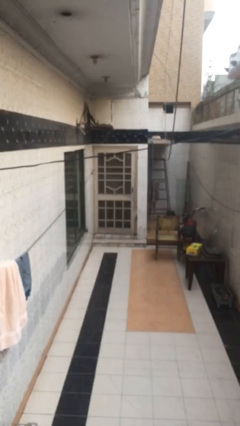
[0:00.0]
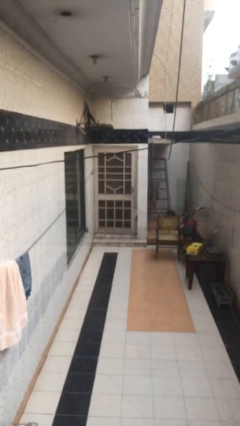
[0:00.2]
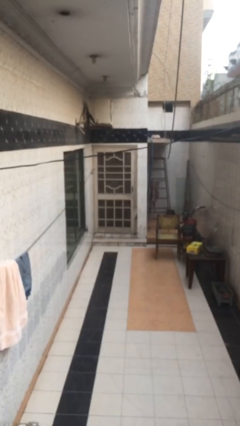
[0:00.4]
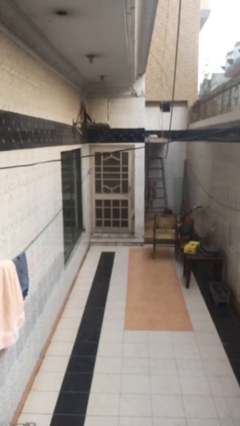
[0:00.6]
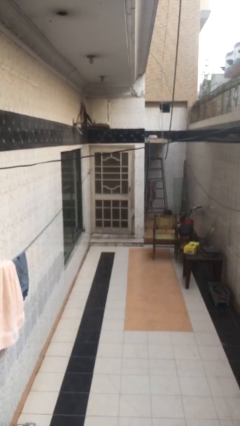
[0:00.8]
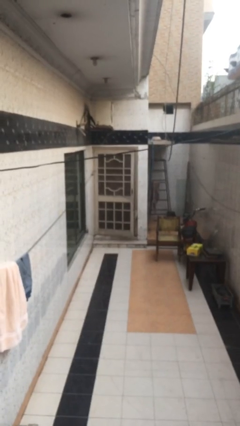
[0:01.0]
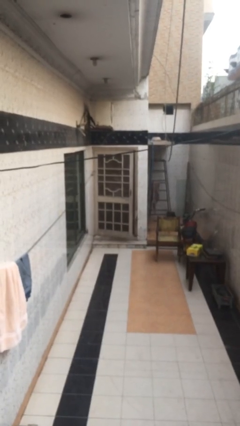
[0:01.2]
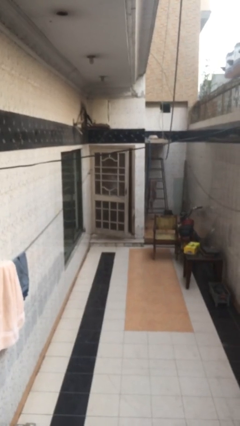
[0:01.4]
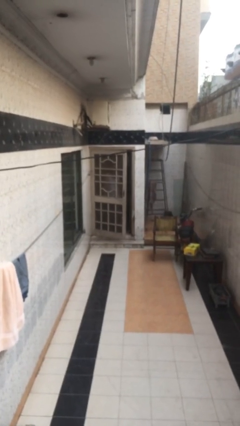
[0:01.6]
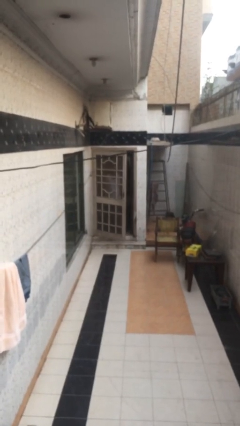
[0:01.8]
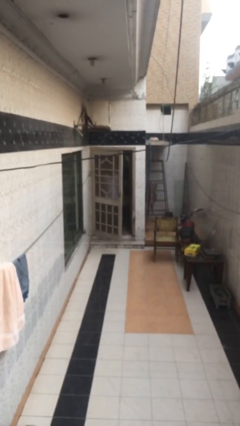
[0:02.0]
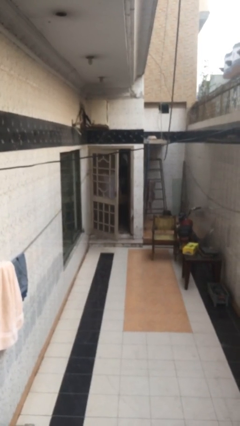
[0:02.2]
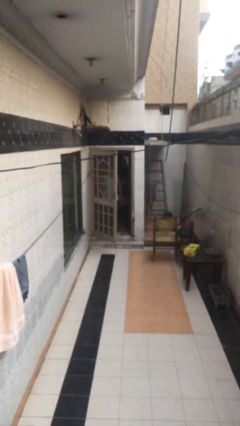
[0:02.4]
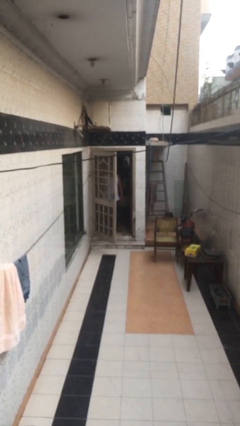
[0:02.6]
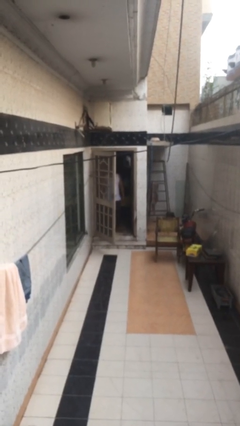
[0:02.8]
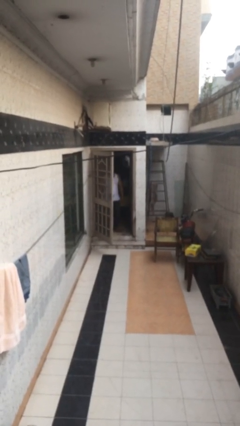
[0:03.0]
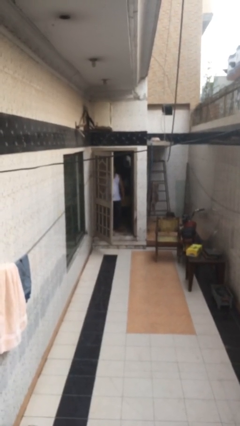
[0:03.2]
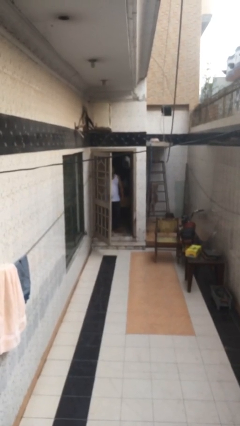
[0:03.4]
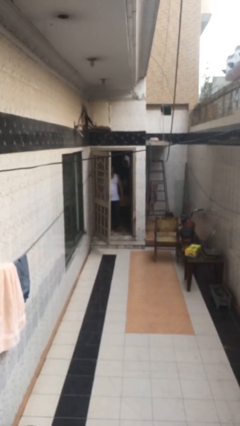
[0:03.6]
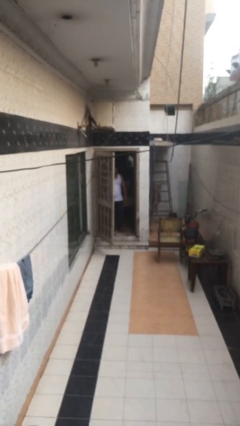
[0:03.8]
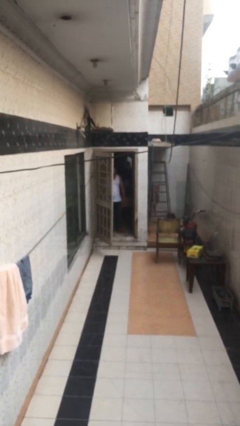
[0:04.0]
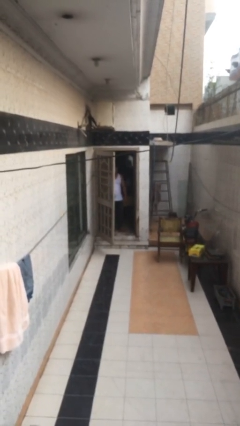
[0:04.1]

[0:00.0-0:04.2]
person opens facility door

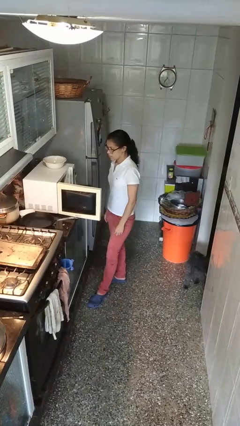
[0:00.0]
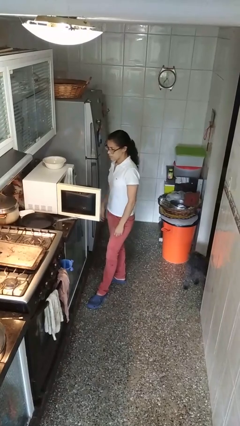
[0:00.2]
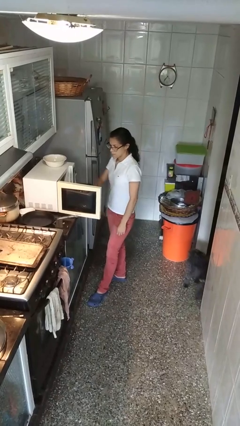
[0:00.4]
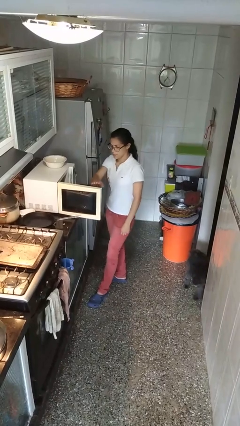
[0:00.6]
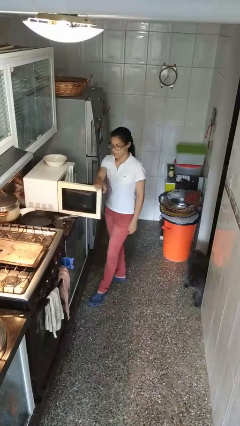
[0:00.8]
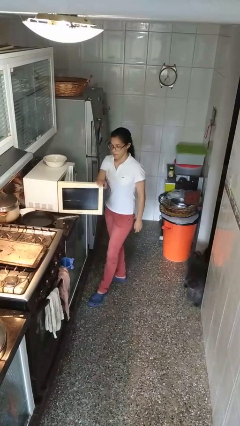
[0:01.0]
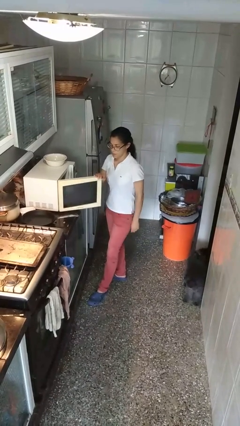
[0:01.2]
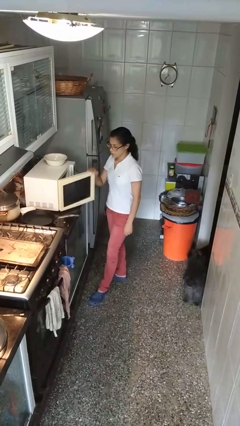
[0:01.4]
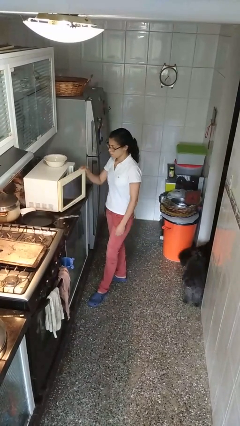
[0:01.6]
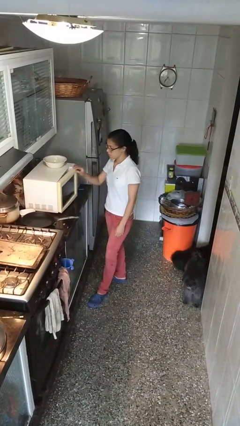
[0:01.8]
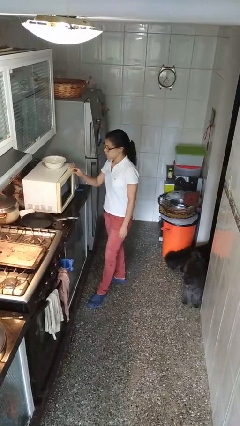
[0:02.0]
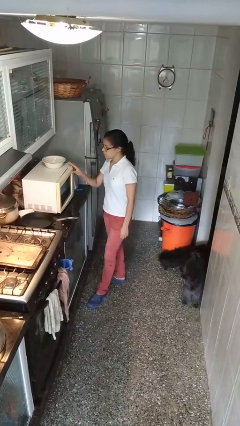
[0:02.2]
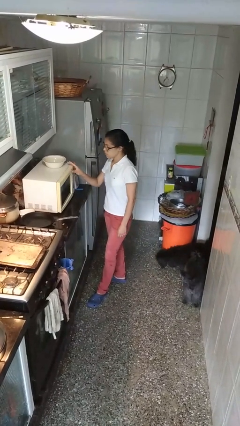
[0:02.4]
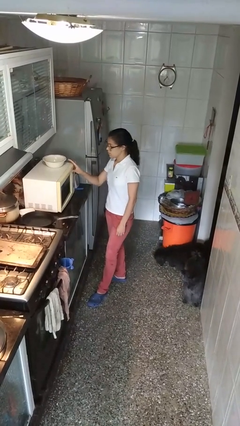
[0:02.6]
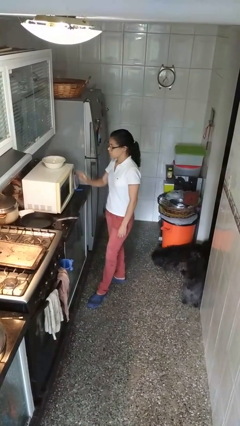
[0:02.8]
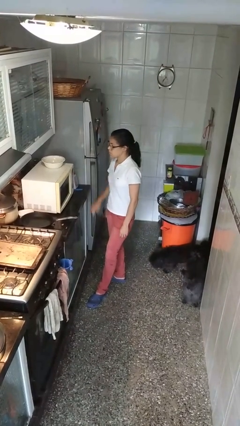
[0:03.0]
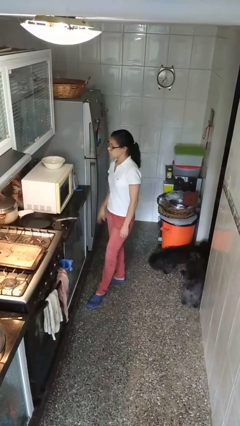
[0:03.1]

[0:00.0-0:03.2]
person closes microwave

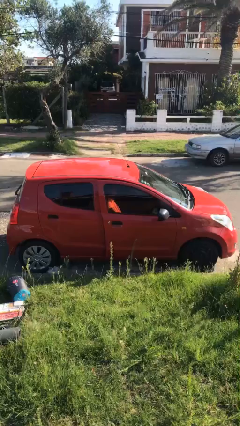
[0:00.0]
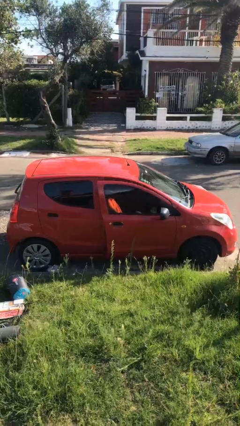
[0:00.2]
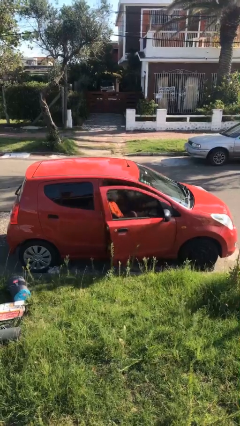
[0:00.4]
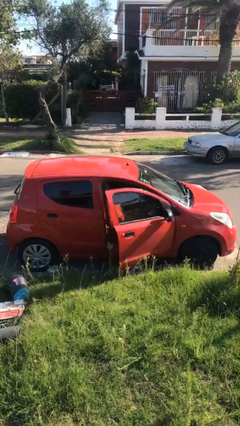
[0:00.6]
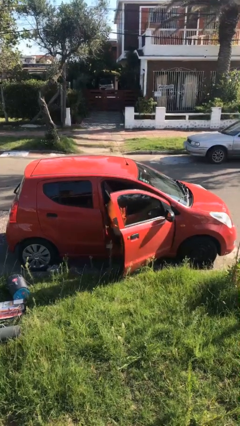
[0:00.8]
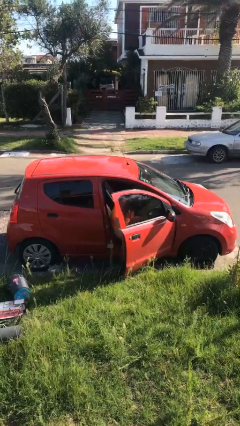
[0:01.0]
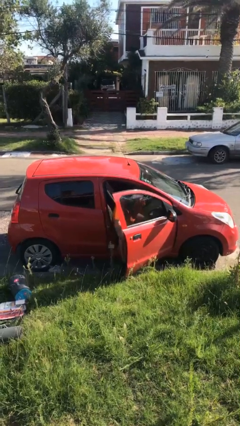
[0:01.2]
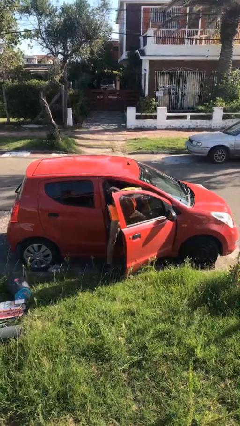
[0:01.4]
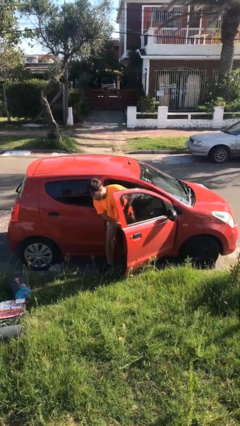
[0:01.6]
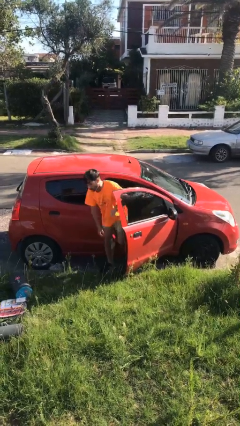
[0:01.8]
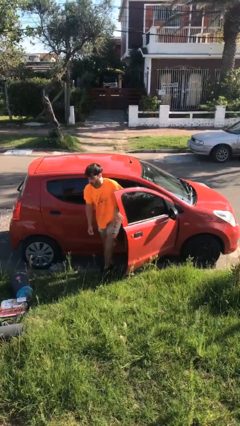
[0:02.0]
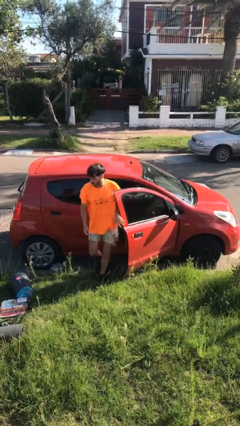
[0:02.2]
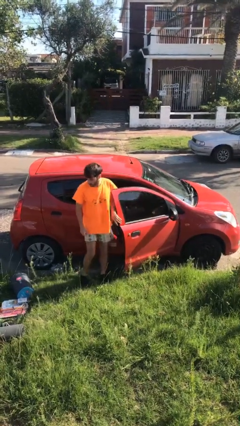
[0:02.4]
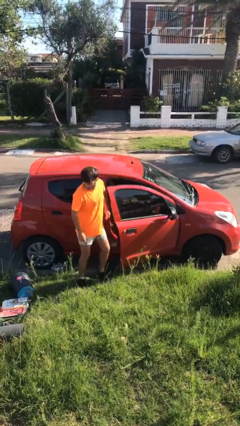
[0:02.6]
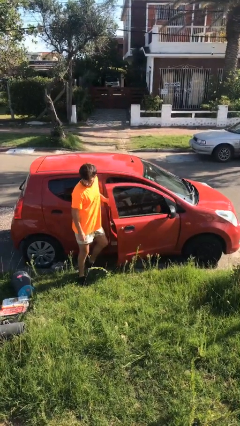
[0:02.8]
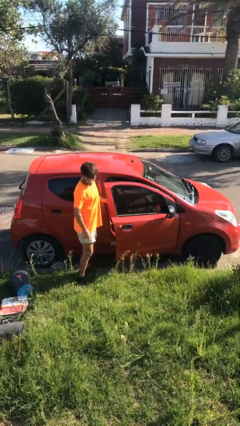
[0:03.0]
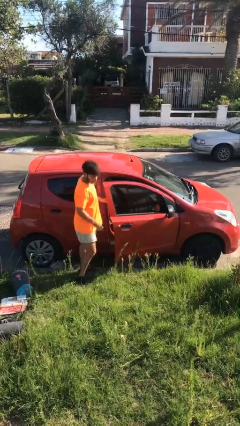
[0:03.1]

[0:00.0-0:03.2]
car drops off person

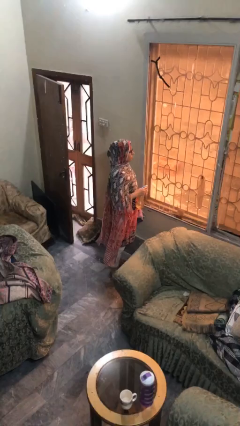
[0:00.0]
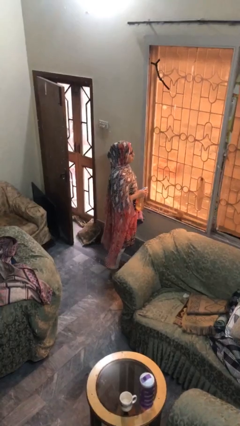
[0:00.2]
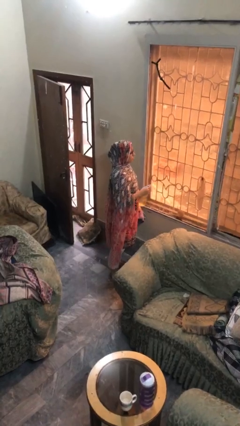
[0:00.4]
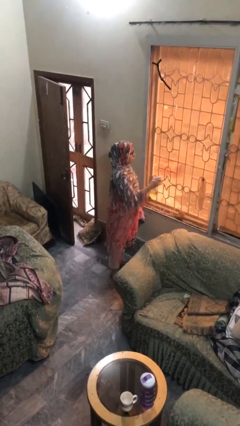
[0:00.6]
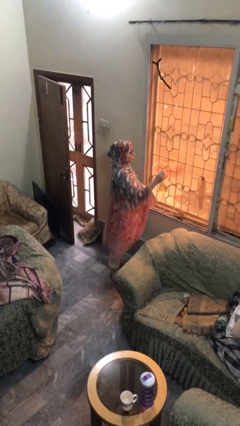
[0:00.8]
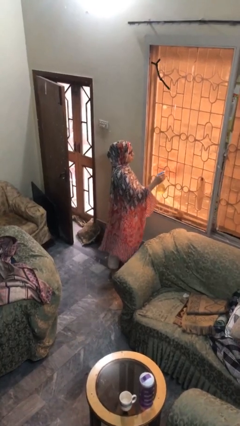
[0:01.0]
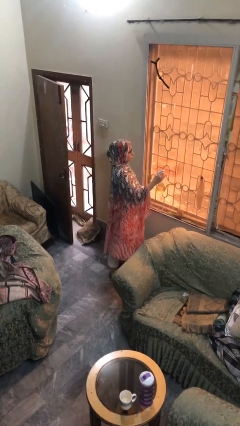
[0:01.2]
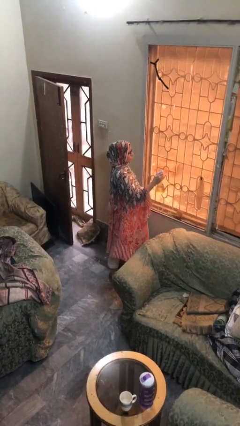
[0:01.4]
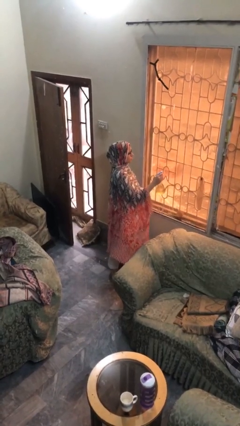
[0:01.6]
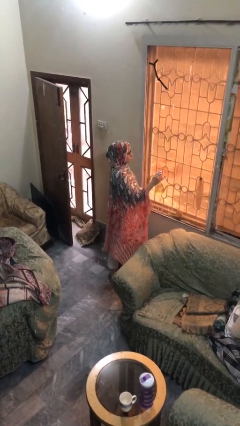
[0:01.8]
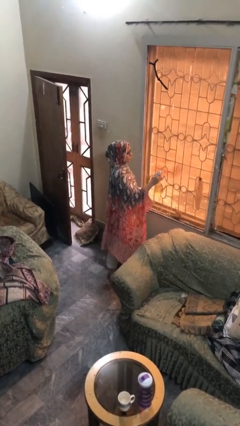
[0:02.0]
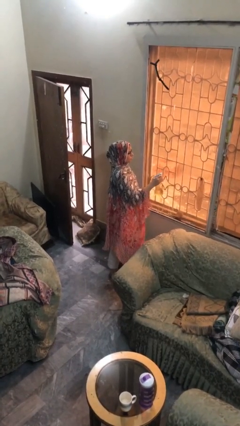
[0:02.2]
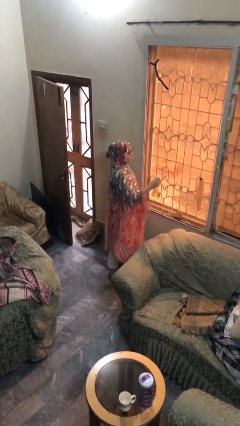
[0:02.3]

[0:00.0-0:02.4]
person sprays from bottle

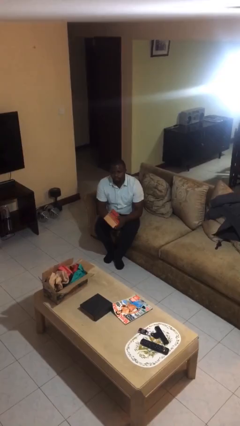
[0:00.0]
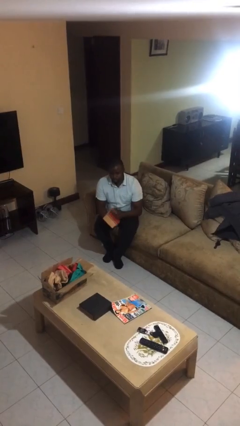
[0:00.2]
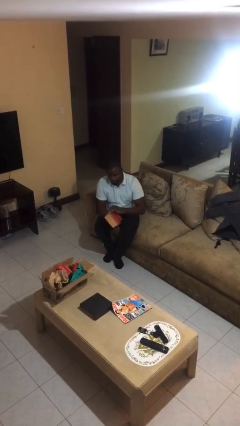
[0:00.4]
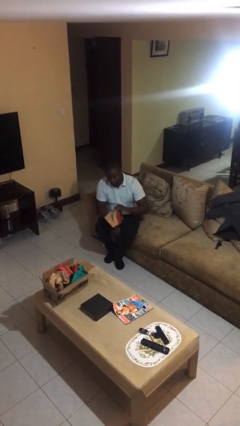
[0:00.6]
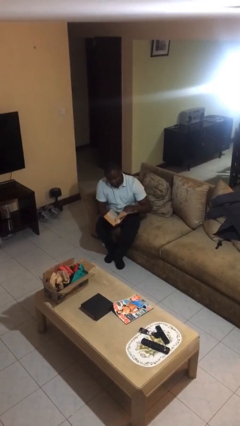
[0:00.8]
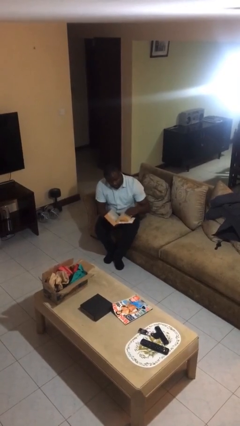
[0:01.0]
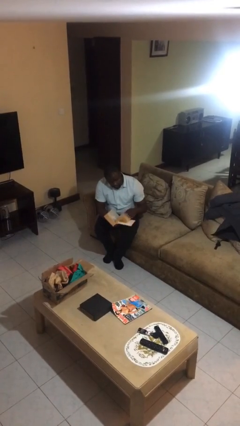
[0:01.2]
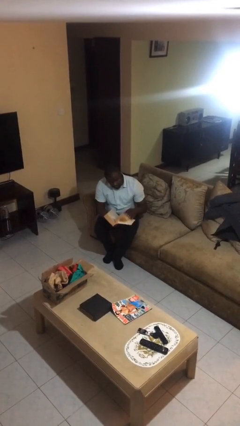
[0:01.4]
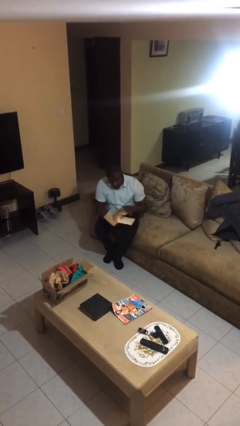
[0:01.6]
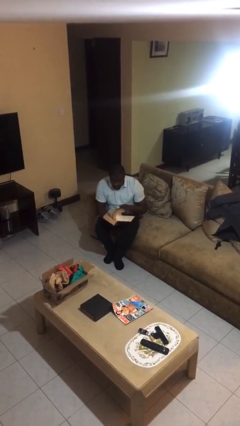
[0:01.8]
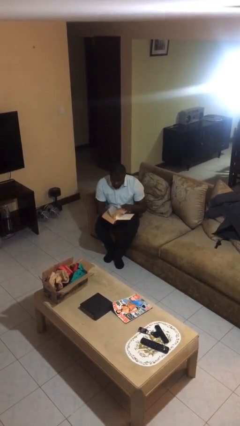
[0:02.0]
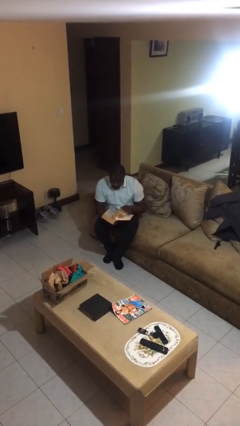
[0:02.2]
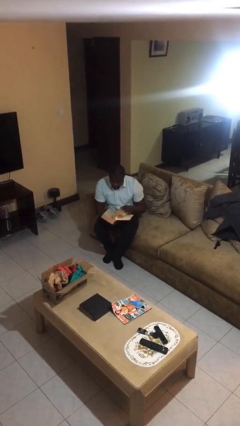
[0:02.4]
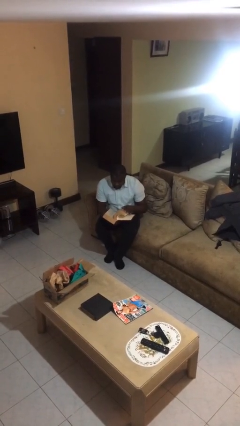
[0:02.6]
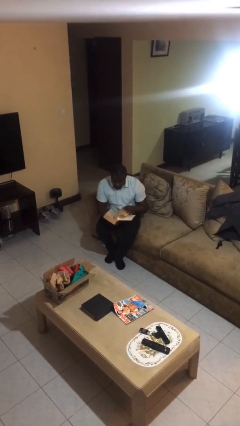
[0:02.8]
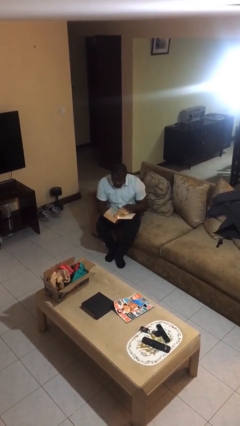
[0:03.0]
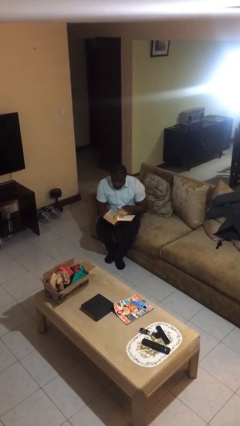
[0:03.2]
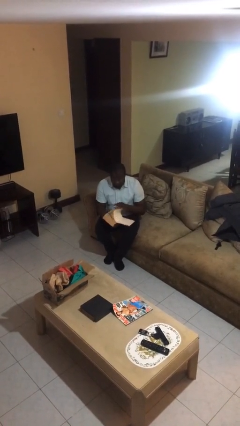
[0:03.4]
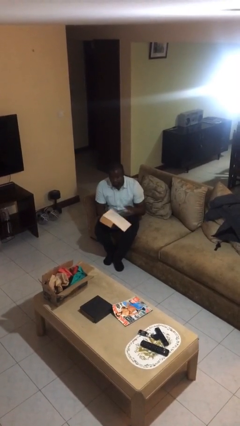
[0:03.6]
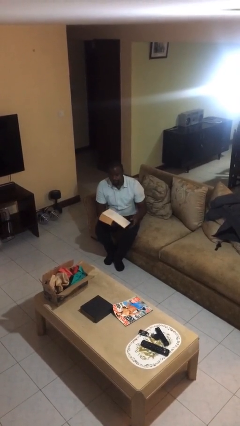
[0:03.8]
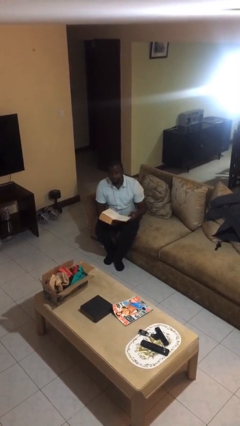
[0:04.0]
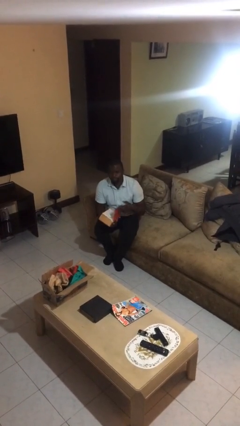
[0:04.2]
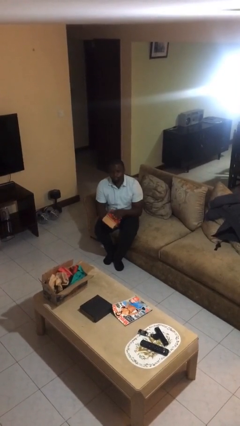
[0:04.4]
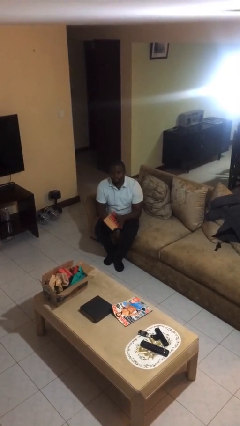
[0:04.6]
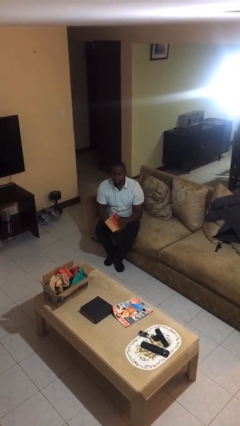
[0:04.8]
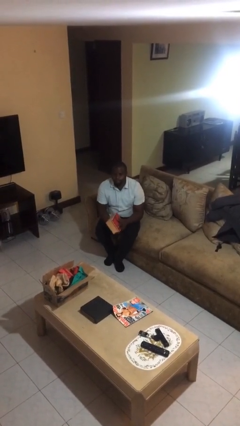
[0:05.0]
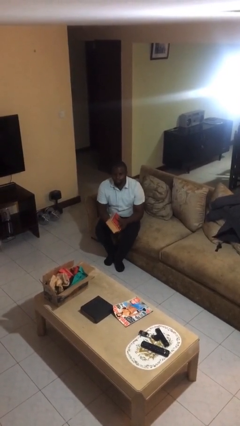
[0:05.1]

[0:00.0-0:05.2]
person reads book
